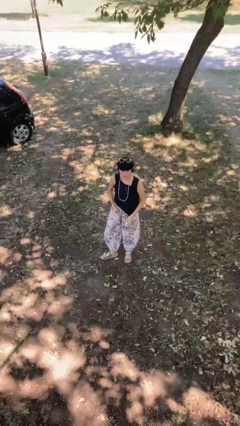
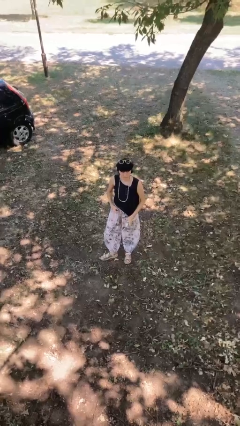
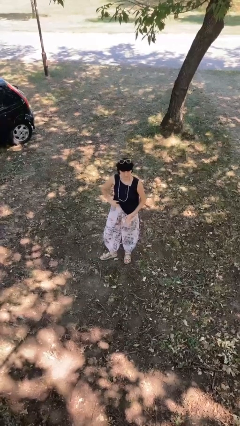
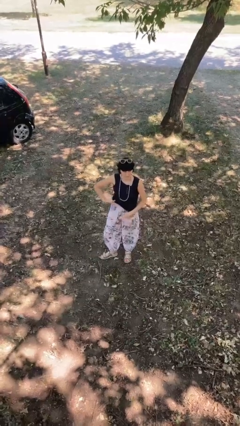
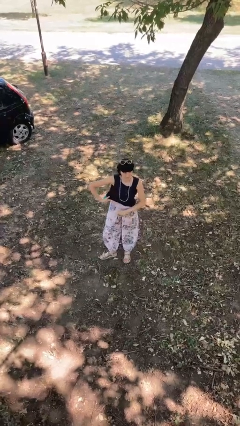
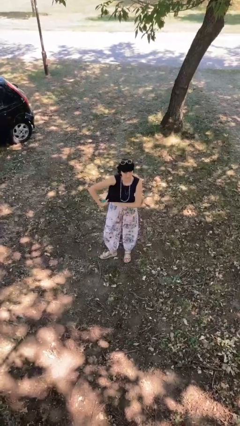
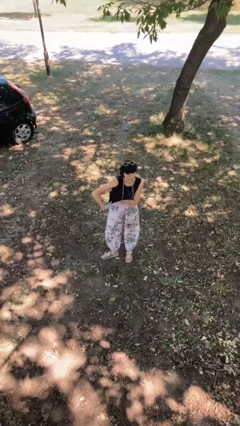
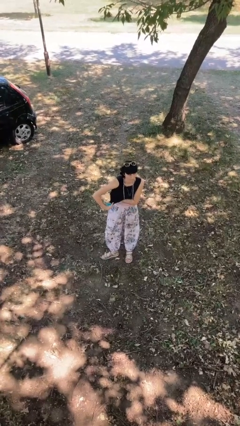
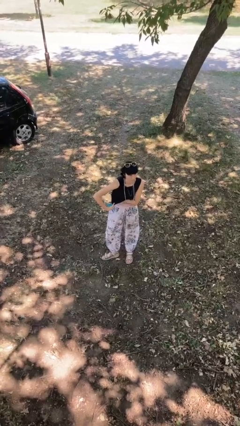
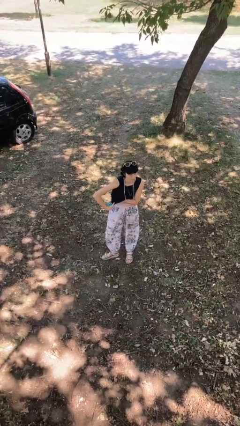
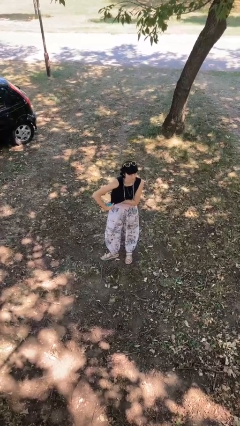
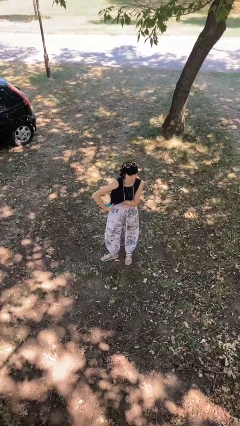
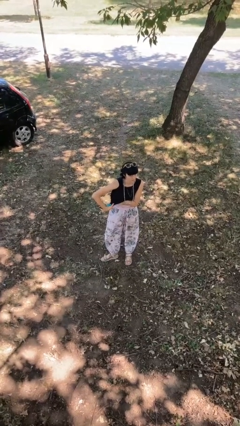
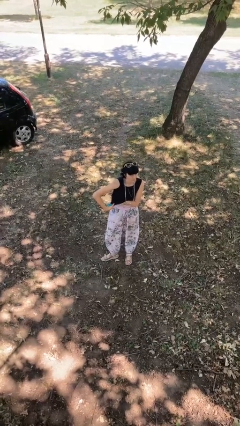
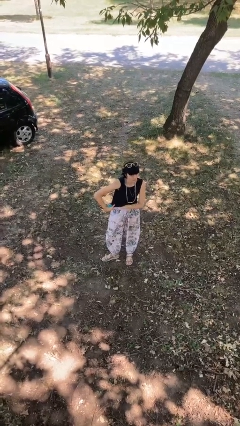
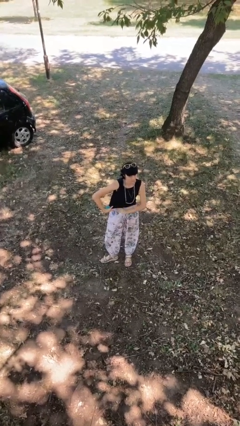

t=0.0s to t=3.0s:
person applies deodorant

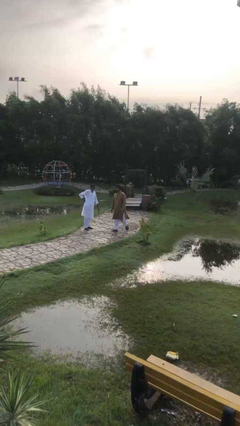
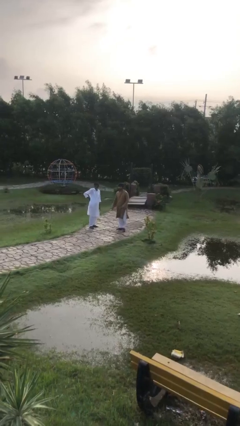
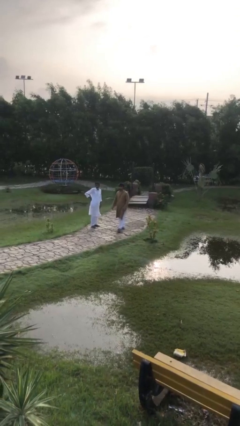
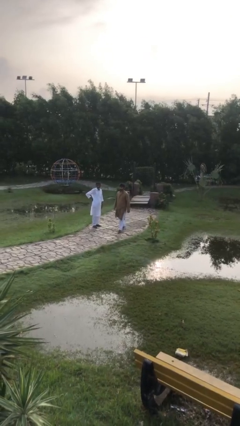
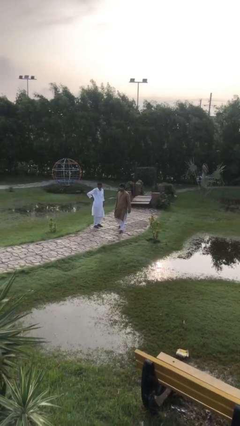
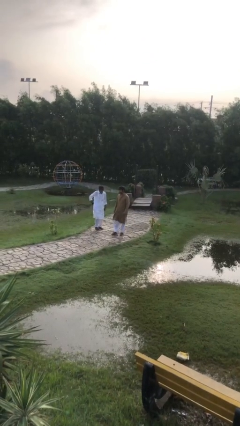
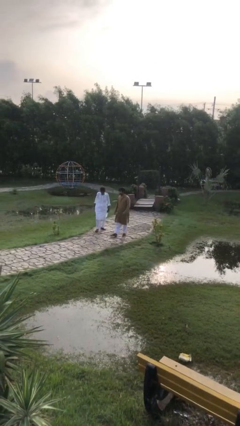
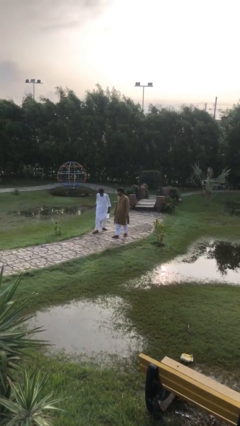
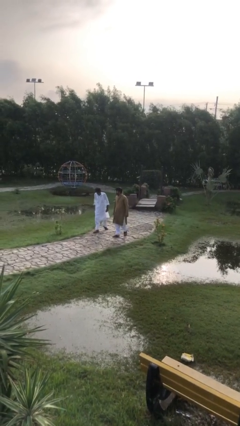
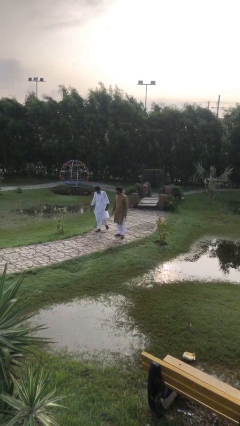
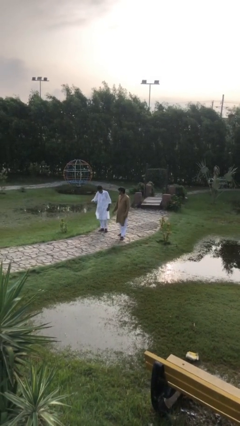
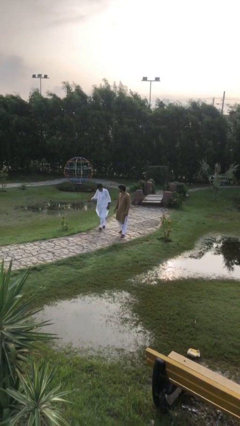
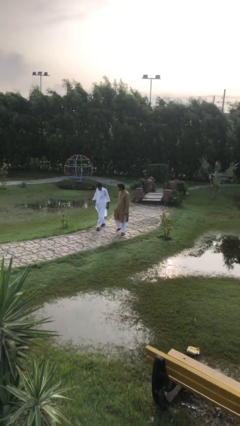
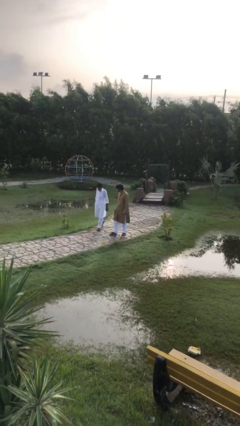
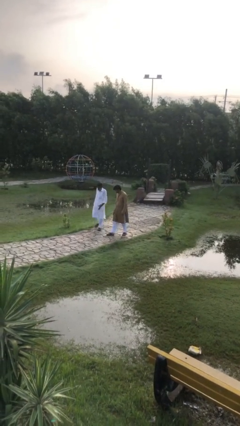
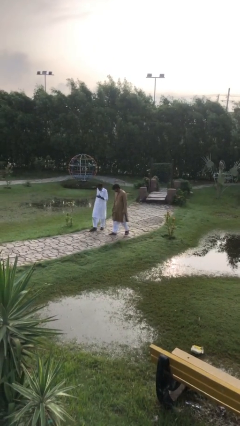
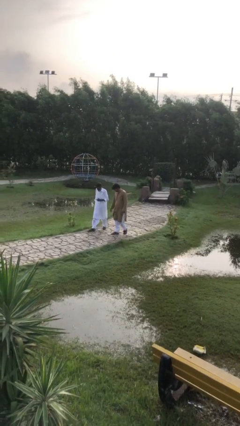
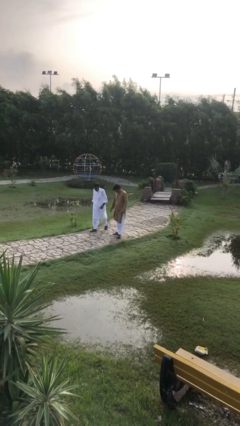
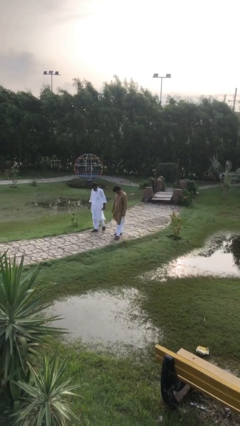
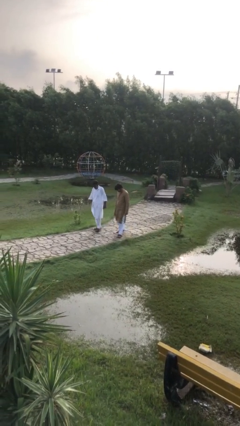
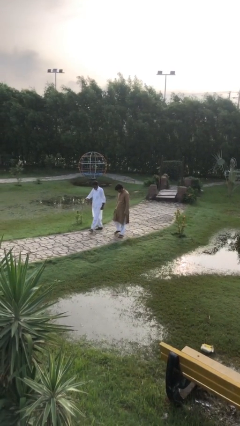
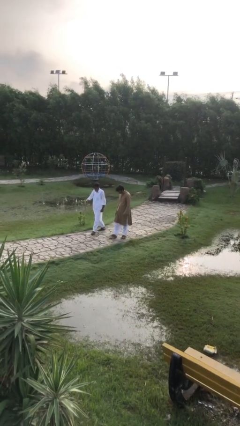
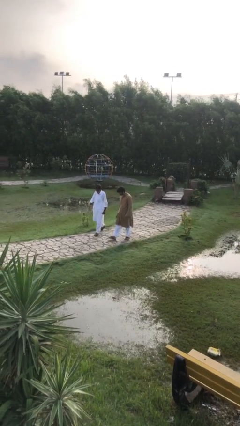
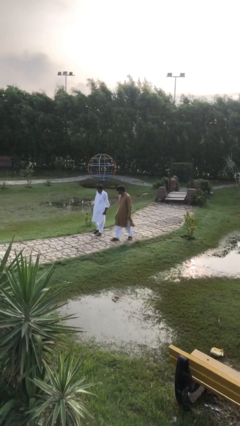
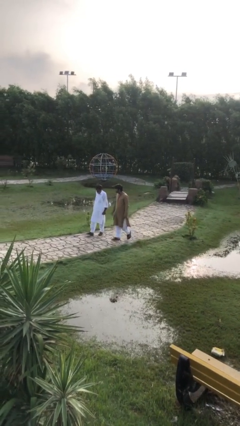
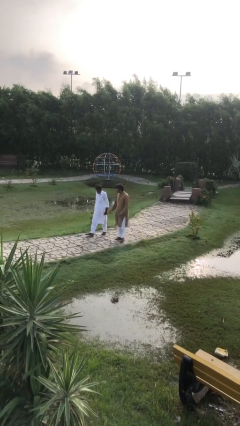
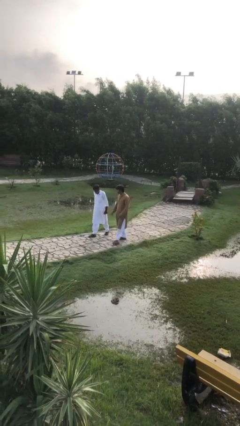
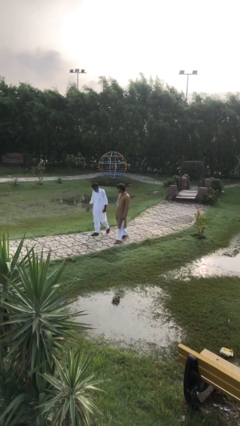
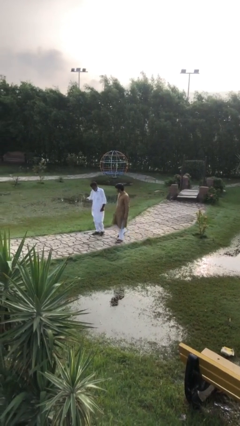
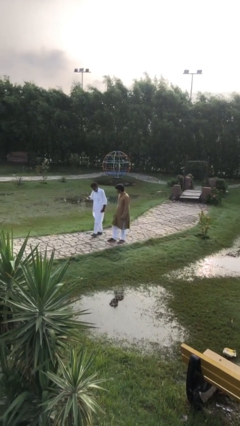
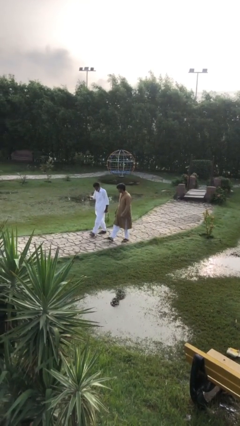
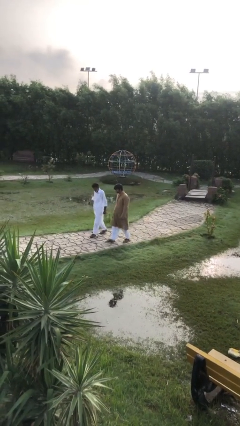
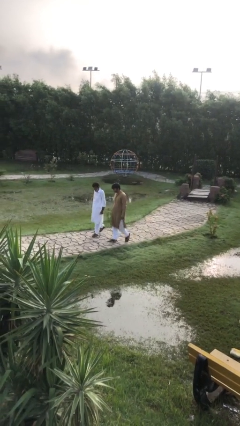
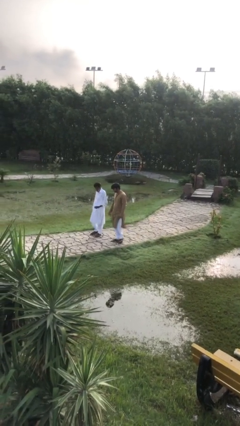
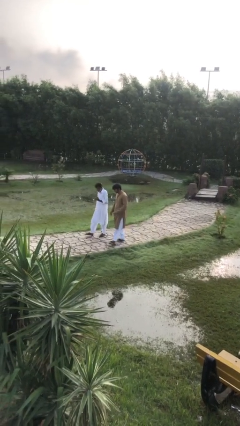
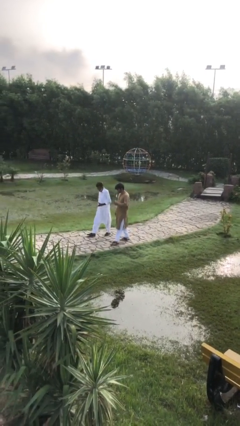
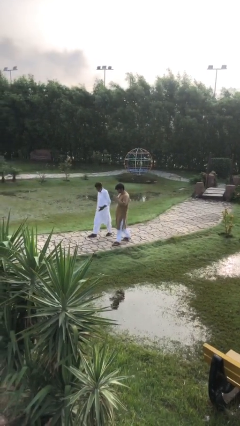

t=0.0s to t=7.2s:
person talks to person

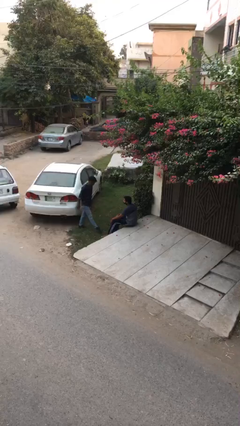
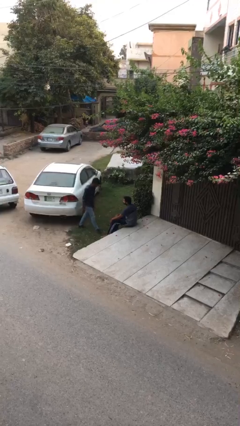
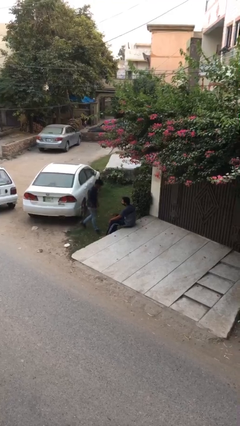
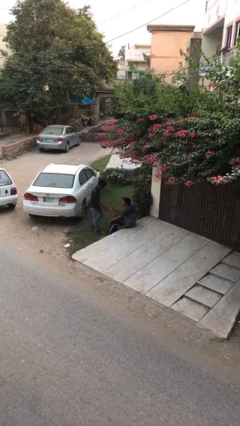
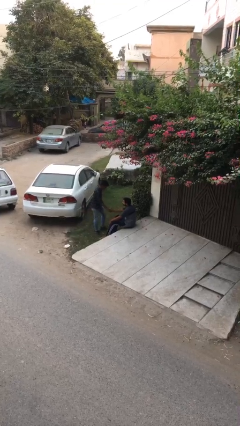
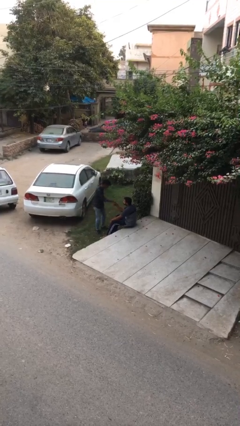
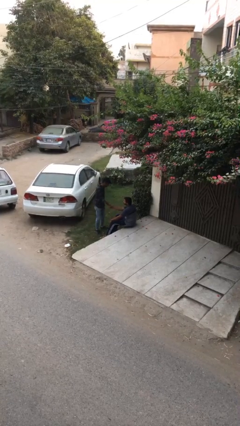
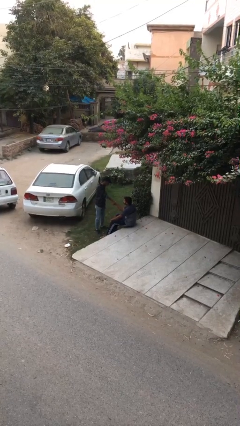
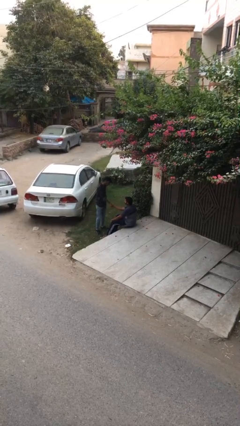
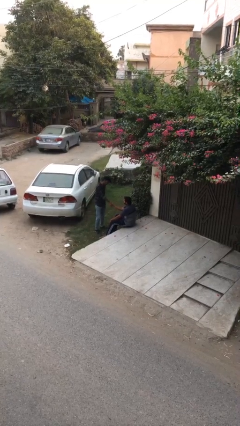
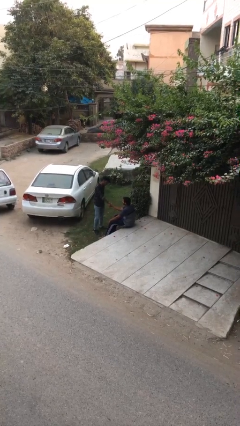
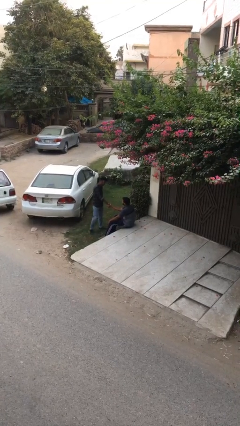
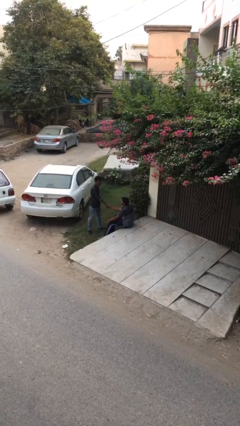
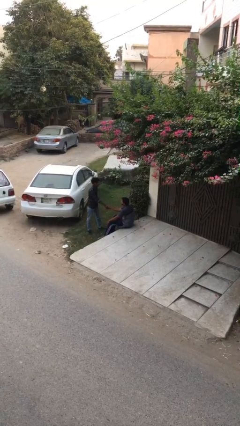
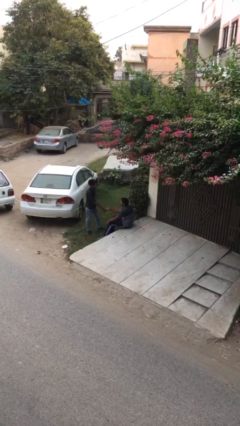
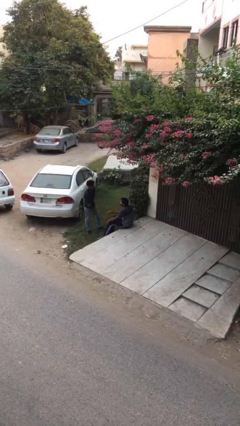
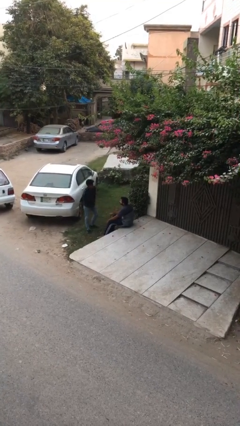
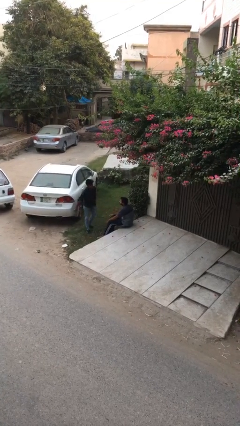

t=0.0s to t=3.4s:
person shakes hand

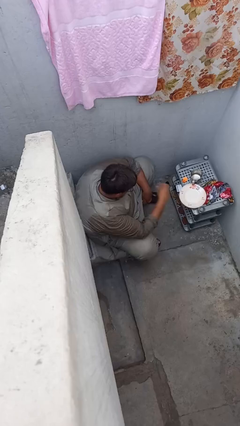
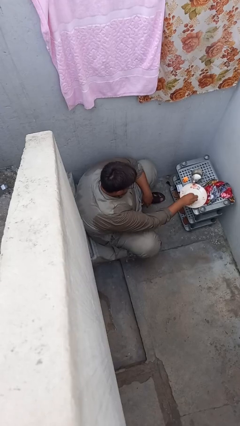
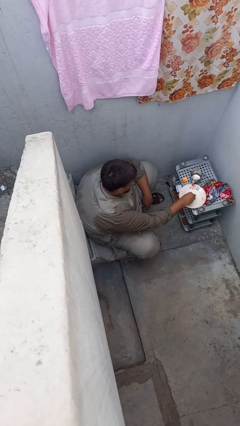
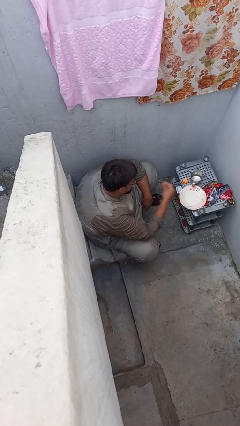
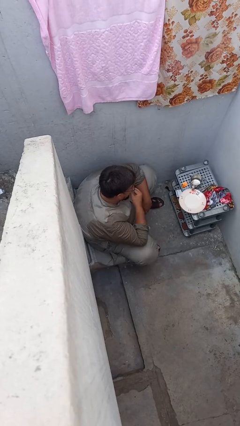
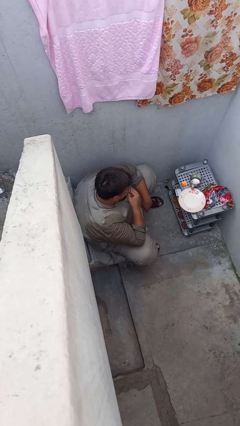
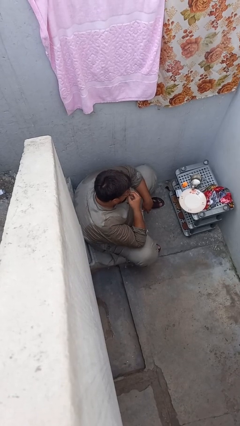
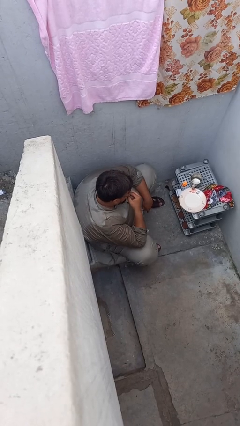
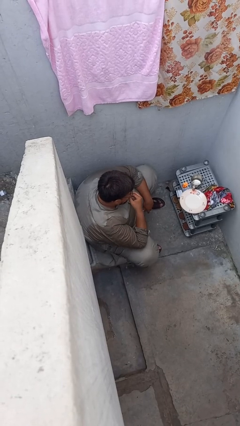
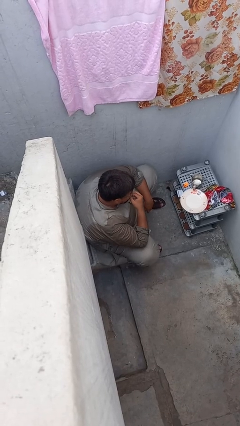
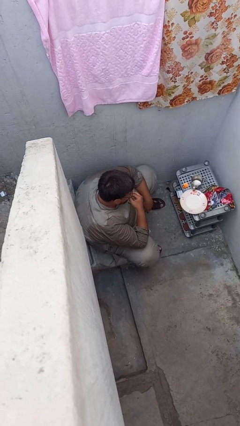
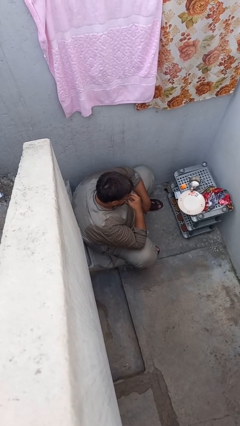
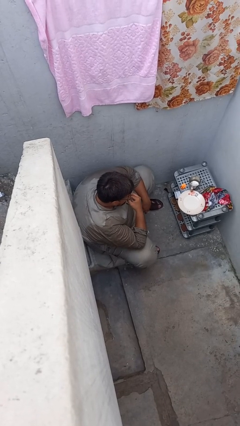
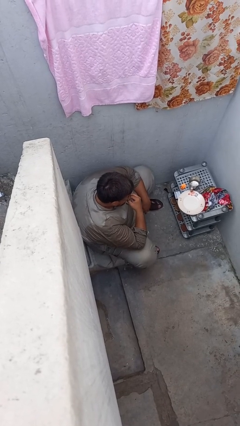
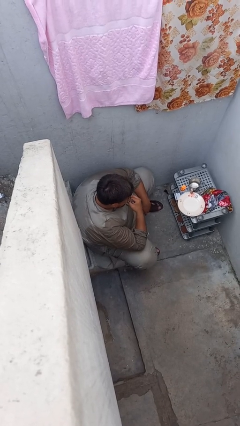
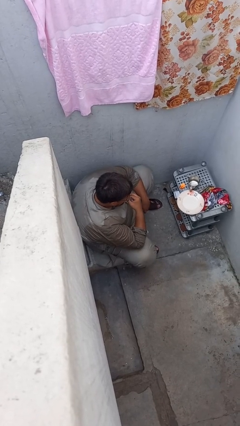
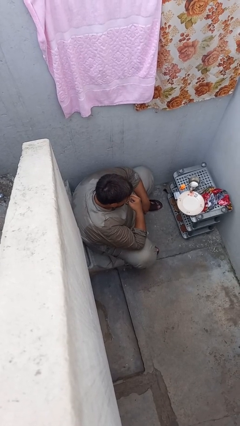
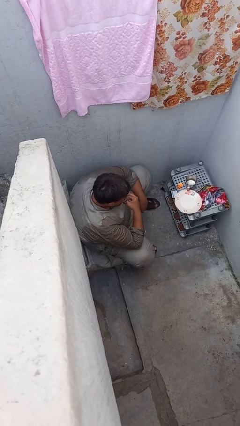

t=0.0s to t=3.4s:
person eats with hands
